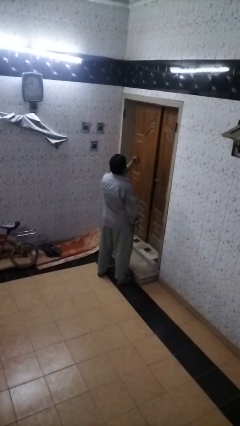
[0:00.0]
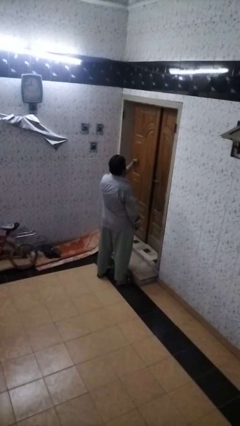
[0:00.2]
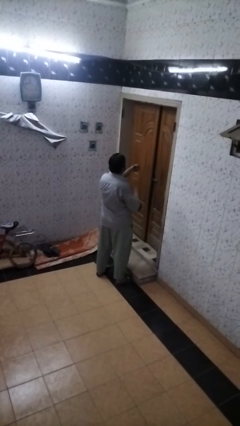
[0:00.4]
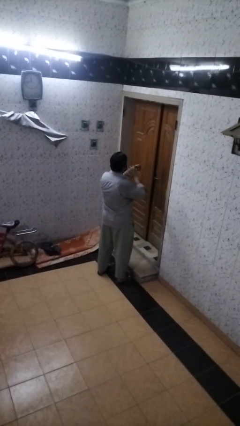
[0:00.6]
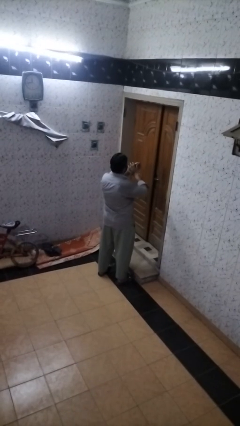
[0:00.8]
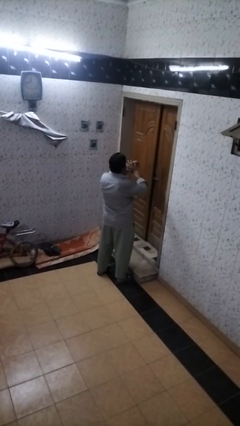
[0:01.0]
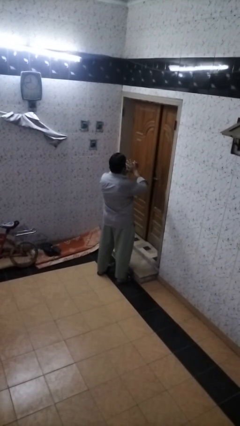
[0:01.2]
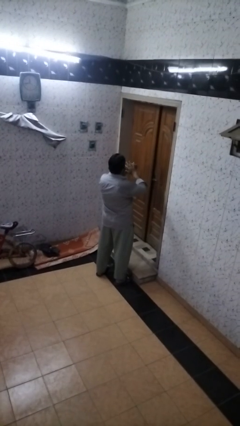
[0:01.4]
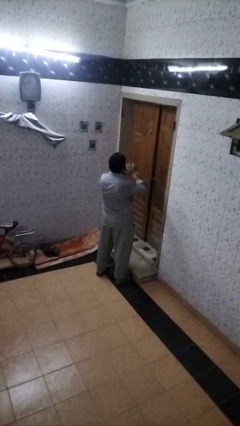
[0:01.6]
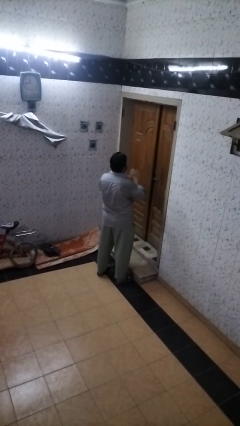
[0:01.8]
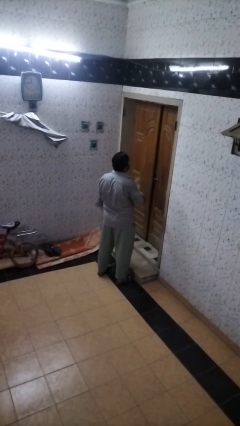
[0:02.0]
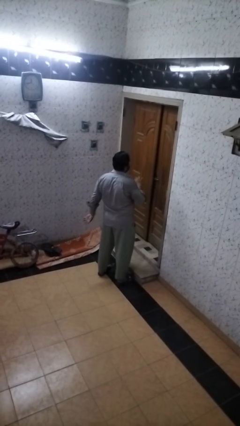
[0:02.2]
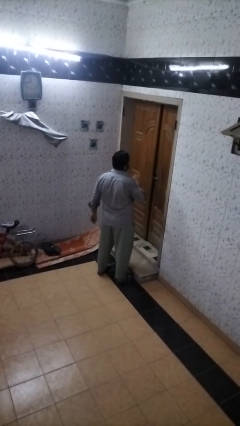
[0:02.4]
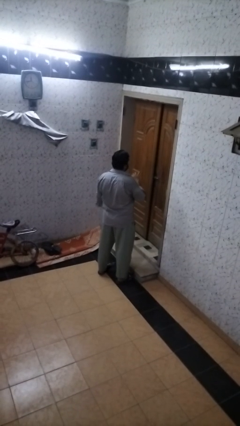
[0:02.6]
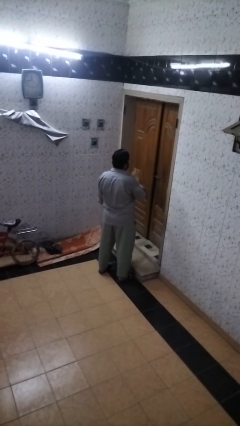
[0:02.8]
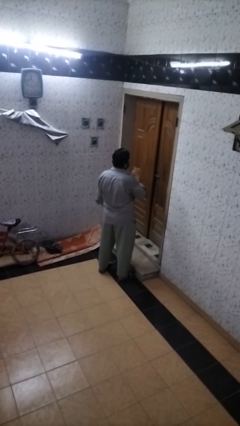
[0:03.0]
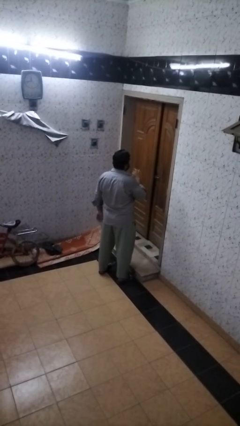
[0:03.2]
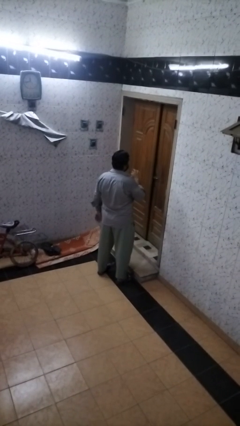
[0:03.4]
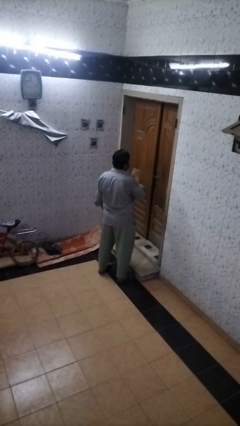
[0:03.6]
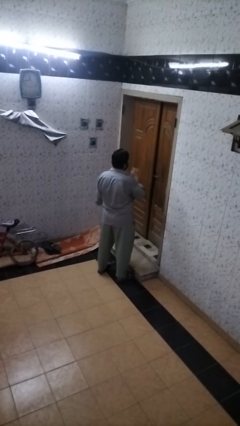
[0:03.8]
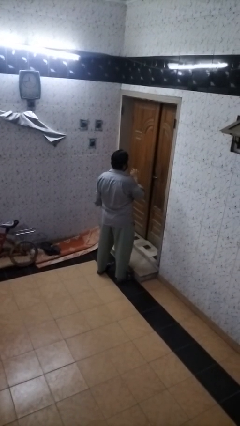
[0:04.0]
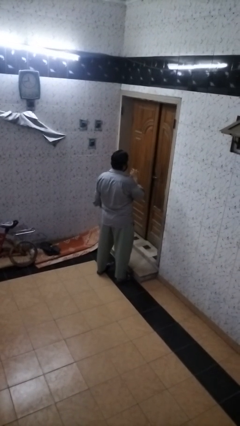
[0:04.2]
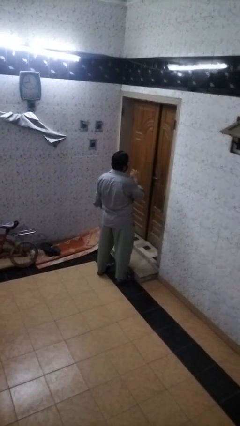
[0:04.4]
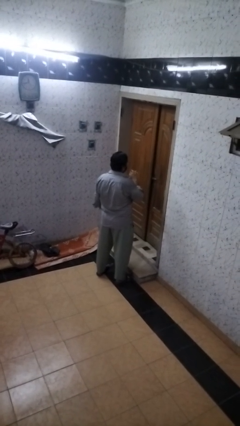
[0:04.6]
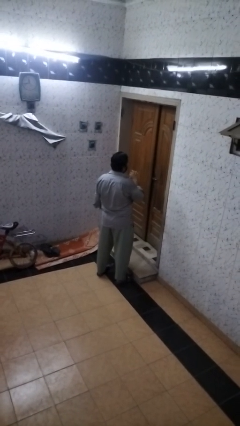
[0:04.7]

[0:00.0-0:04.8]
person puts on ring

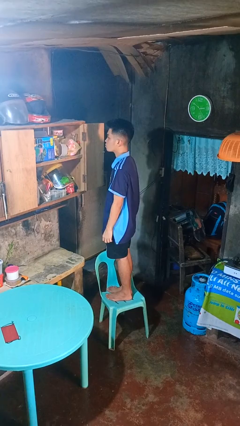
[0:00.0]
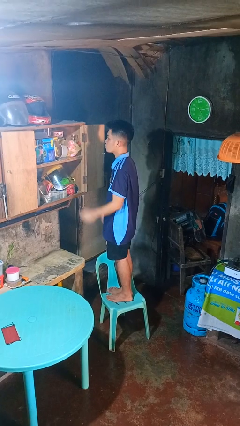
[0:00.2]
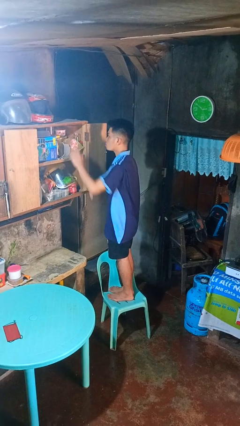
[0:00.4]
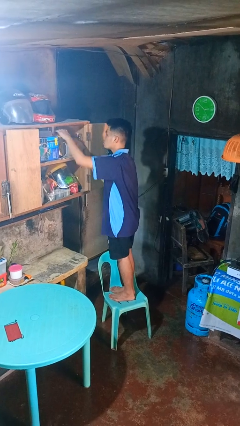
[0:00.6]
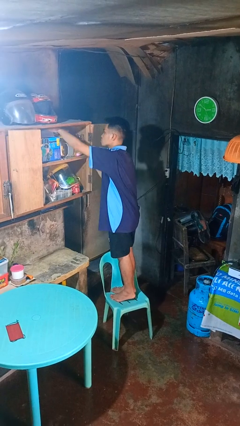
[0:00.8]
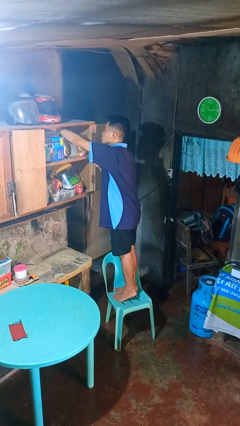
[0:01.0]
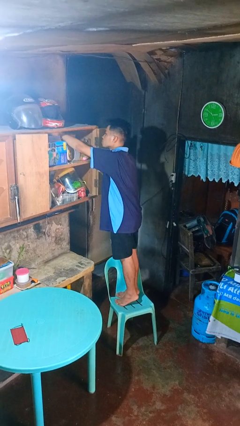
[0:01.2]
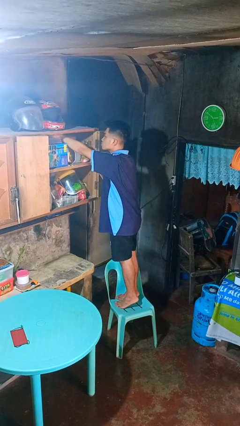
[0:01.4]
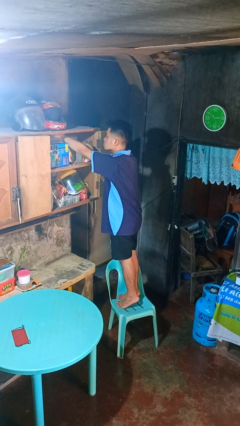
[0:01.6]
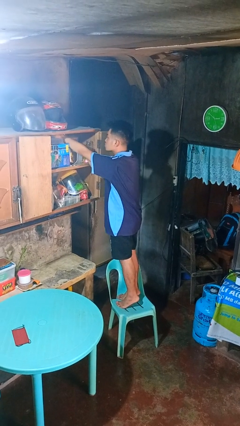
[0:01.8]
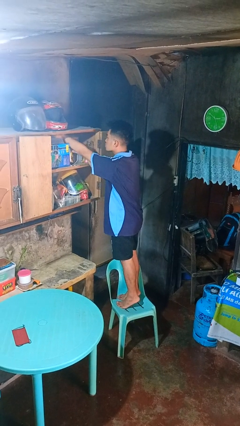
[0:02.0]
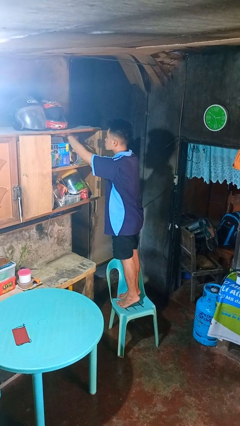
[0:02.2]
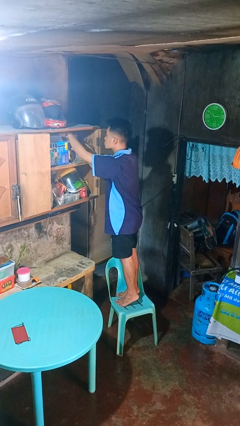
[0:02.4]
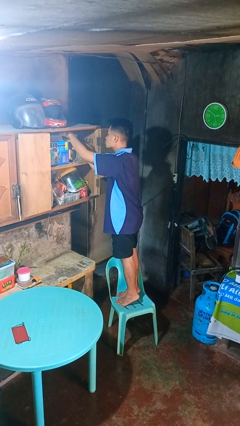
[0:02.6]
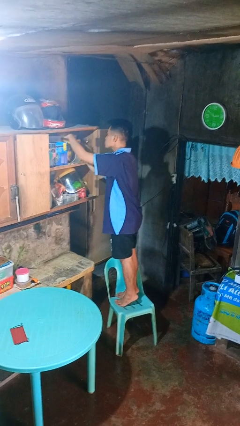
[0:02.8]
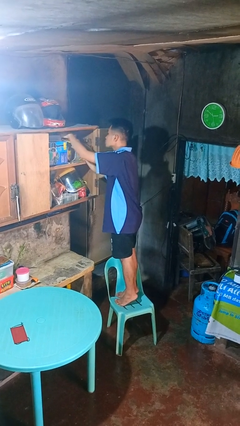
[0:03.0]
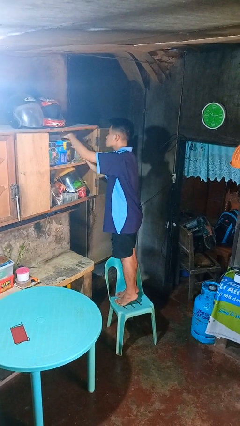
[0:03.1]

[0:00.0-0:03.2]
person searches in cabinet

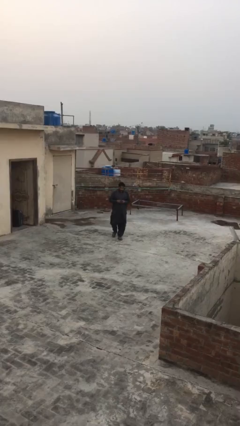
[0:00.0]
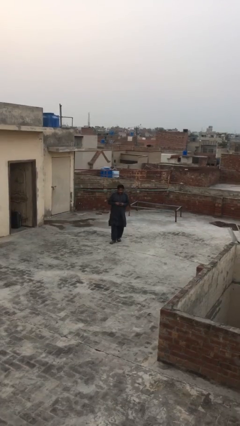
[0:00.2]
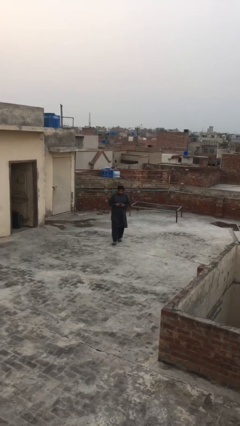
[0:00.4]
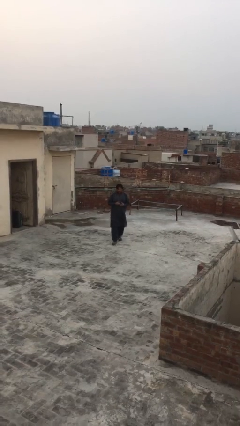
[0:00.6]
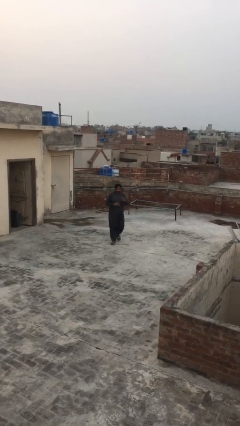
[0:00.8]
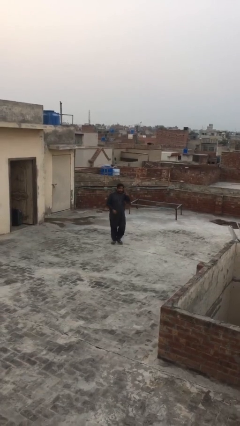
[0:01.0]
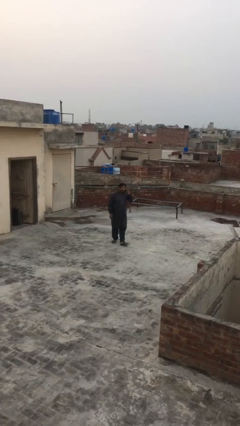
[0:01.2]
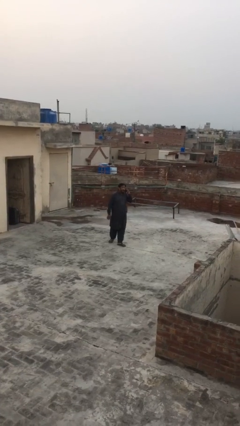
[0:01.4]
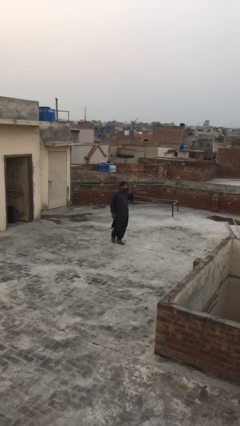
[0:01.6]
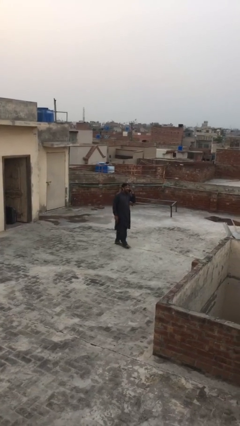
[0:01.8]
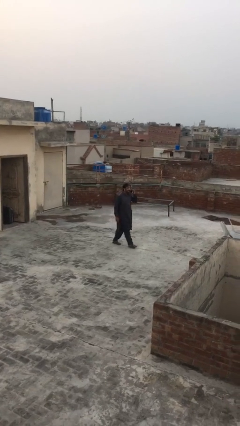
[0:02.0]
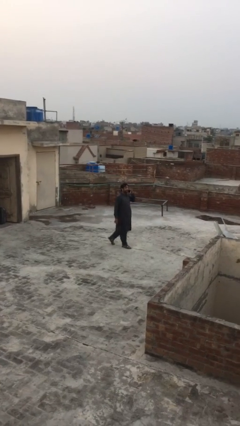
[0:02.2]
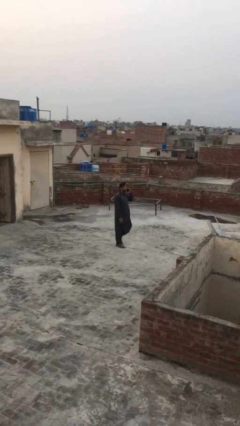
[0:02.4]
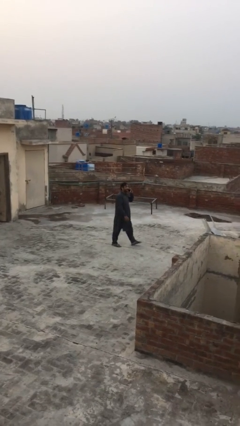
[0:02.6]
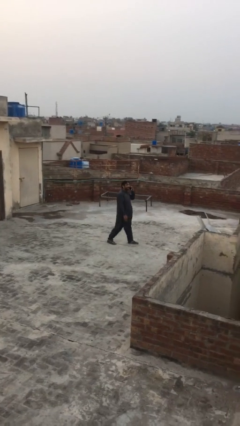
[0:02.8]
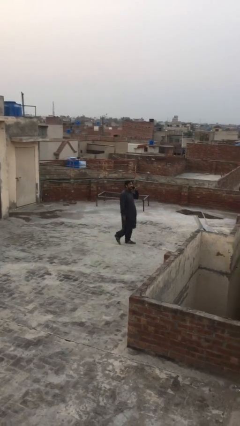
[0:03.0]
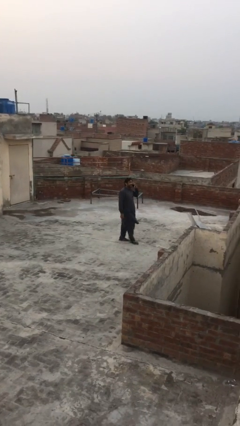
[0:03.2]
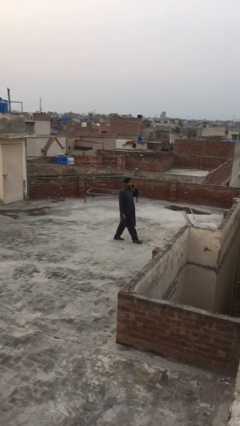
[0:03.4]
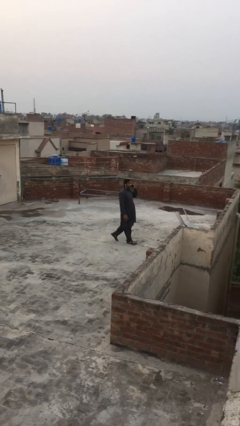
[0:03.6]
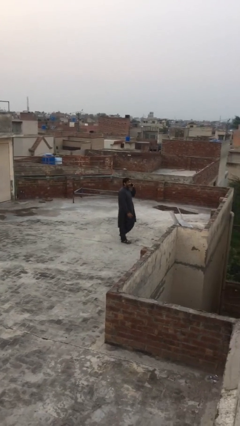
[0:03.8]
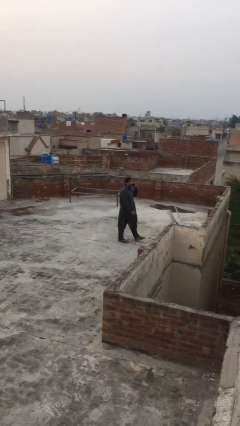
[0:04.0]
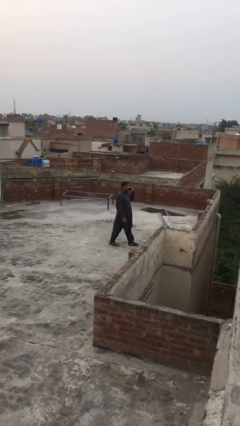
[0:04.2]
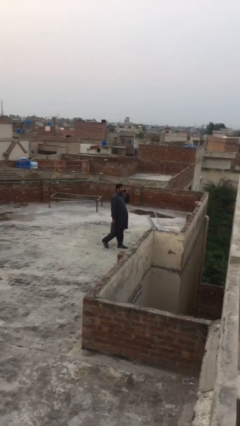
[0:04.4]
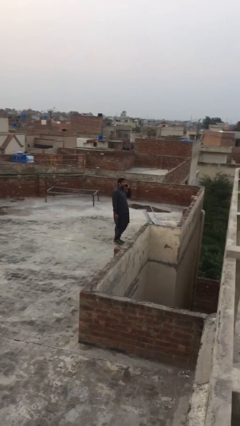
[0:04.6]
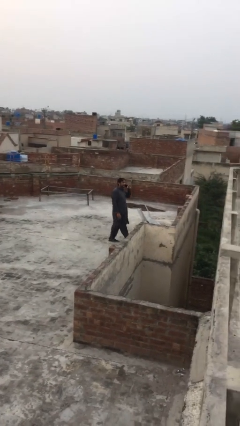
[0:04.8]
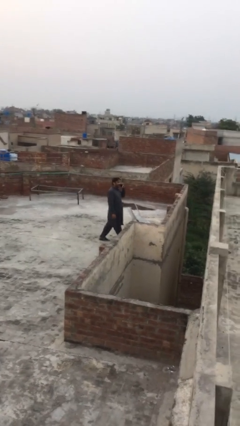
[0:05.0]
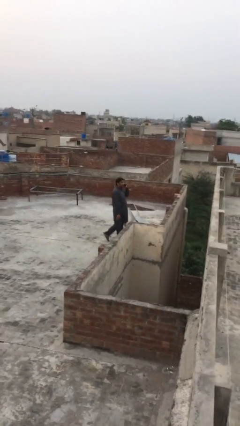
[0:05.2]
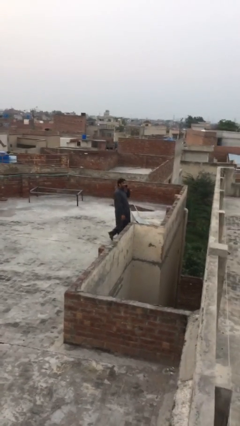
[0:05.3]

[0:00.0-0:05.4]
person talks on phone

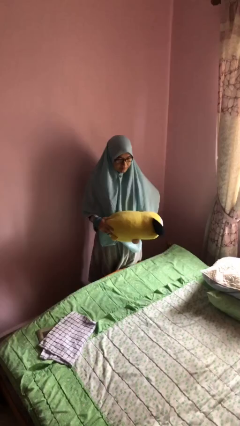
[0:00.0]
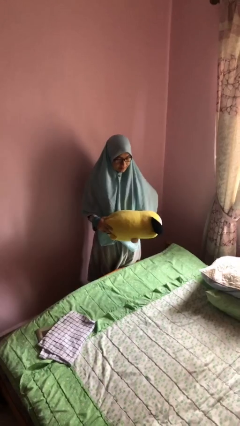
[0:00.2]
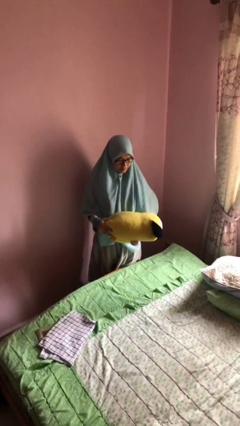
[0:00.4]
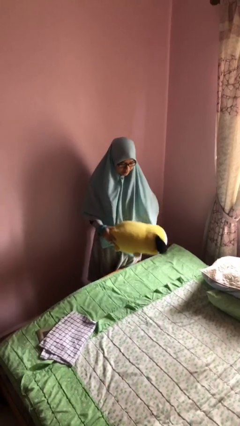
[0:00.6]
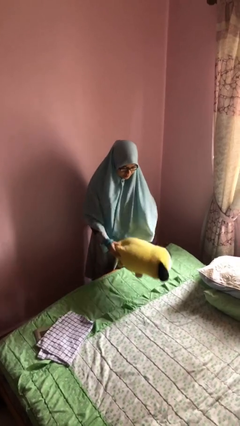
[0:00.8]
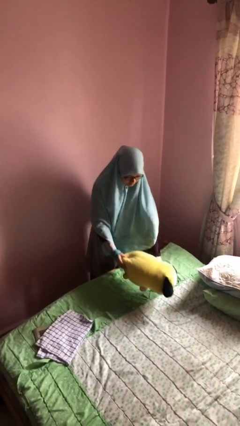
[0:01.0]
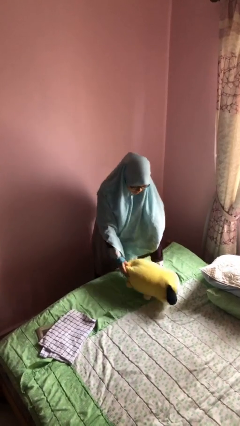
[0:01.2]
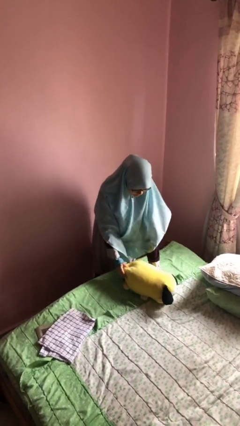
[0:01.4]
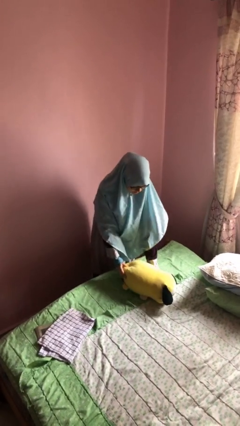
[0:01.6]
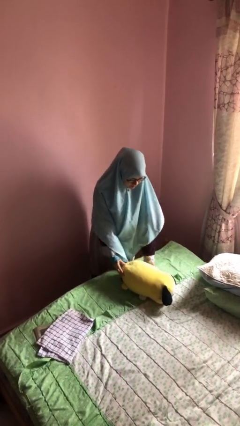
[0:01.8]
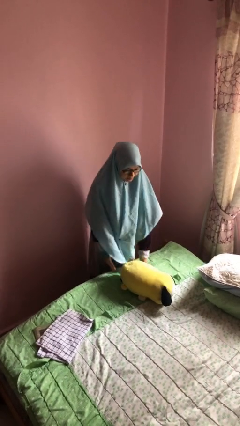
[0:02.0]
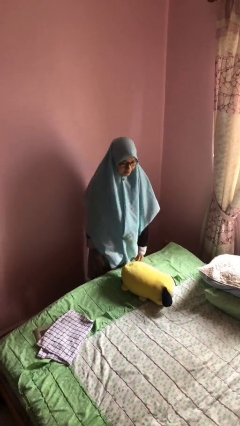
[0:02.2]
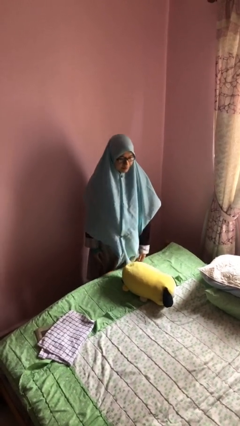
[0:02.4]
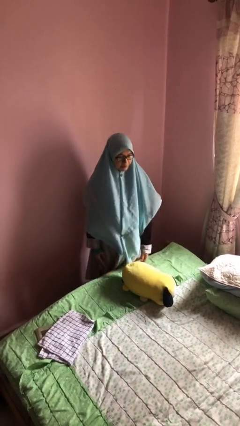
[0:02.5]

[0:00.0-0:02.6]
person puts down object on bed

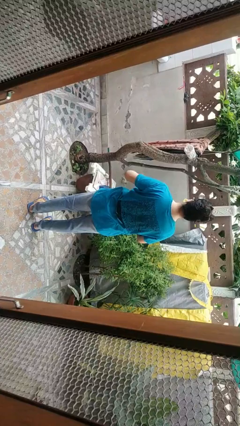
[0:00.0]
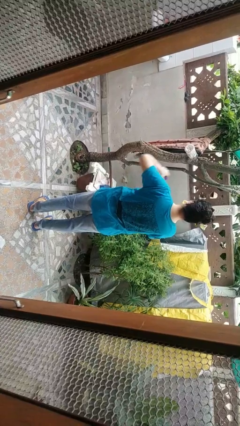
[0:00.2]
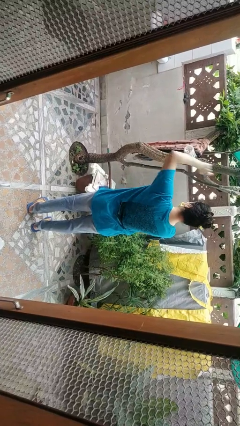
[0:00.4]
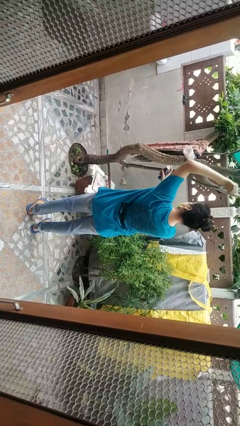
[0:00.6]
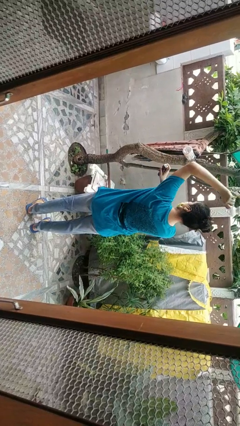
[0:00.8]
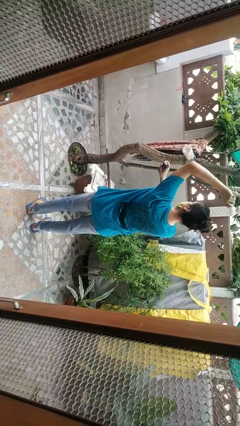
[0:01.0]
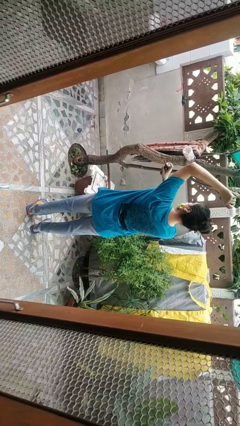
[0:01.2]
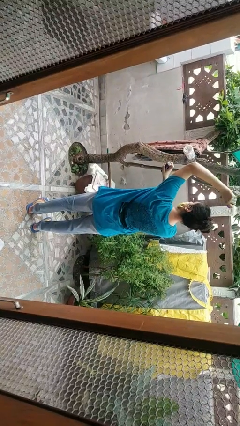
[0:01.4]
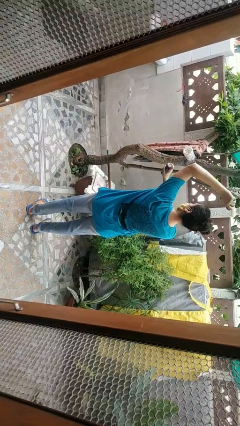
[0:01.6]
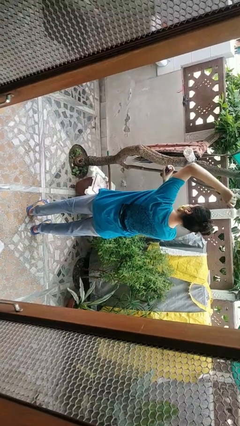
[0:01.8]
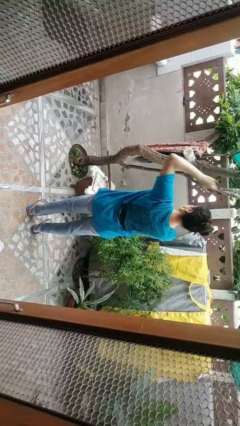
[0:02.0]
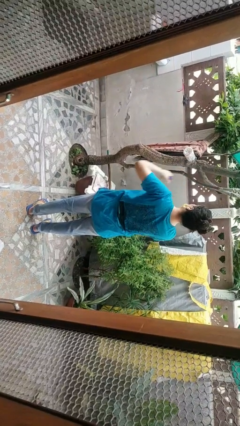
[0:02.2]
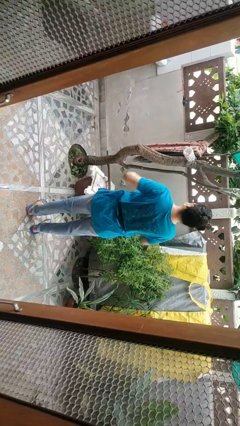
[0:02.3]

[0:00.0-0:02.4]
person applies deodorant
